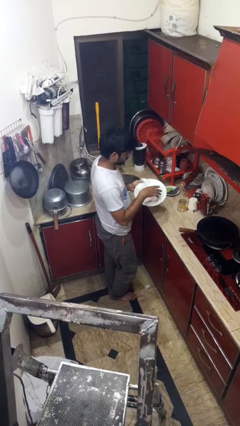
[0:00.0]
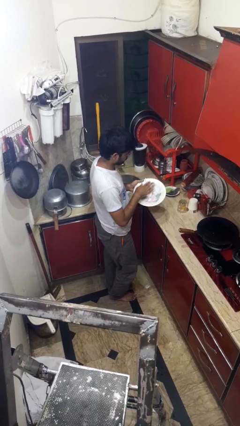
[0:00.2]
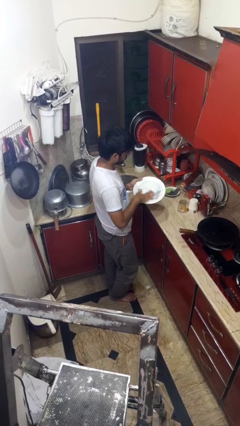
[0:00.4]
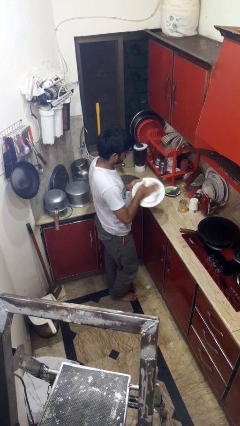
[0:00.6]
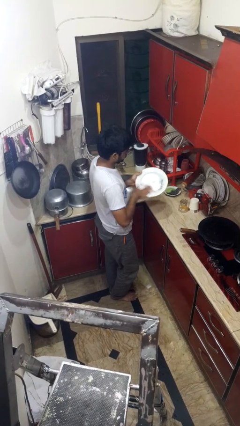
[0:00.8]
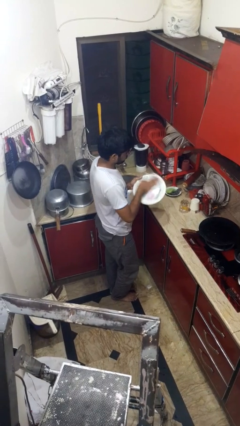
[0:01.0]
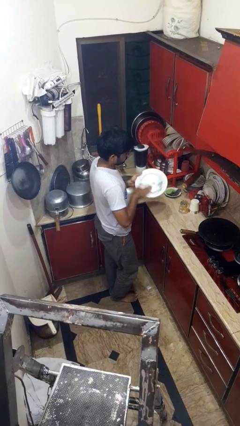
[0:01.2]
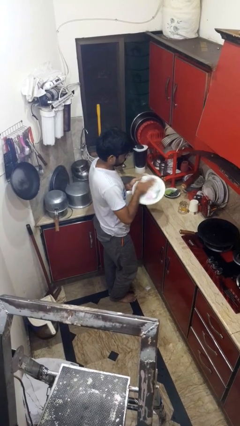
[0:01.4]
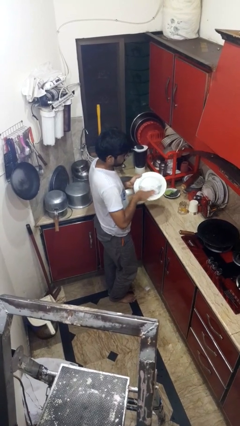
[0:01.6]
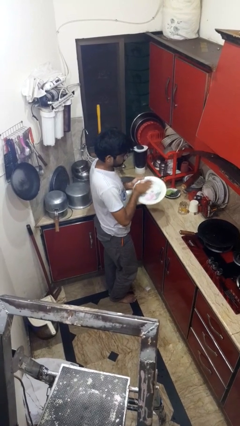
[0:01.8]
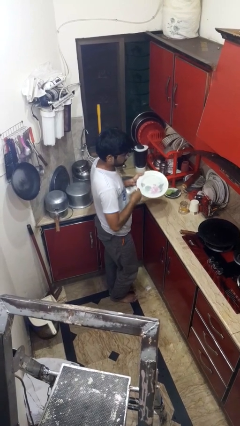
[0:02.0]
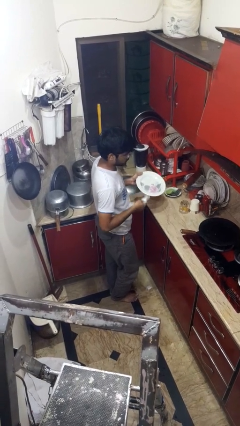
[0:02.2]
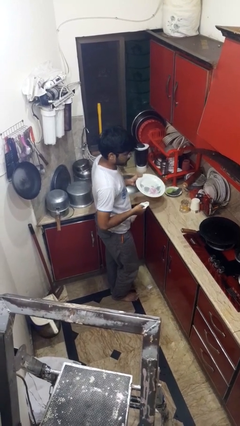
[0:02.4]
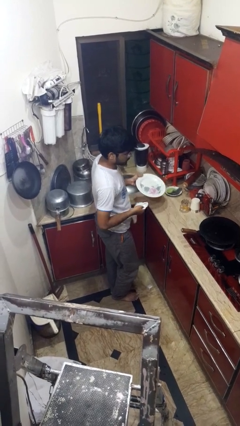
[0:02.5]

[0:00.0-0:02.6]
person dries dish

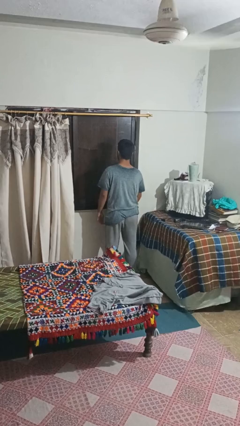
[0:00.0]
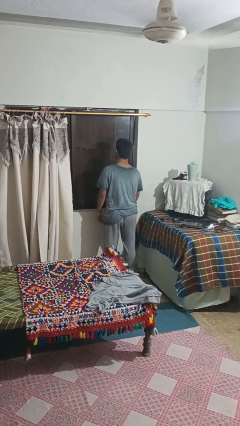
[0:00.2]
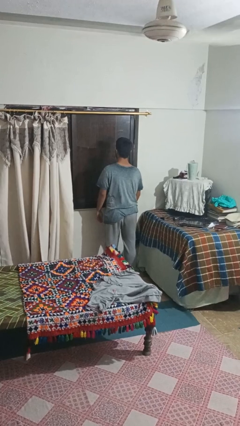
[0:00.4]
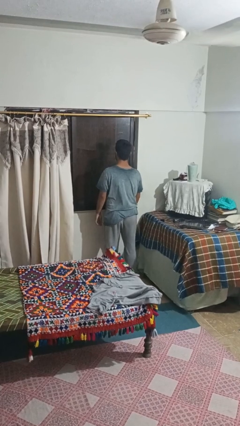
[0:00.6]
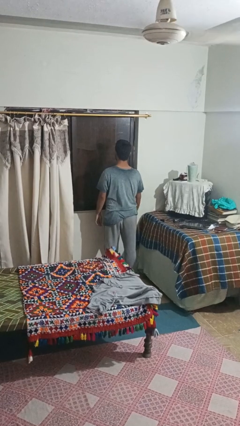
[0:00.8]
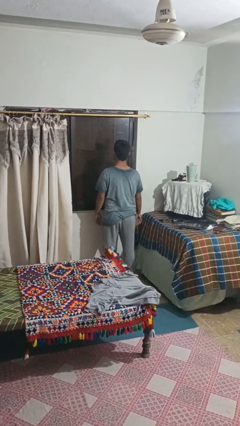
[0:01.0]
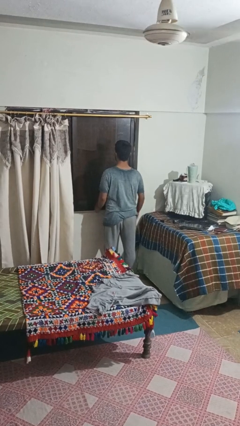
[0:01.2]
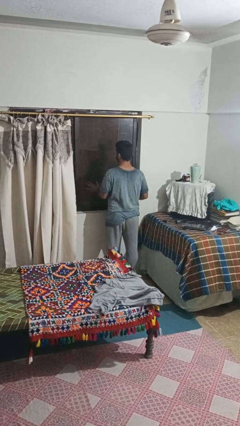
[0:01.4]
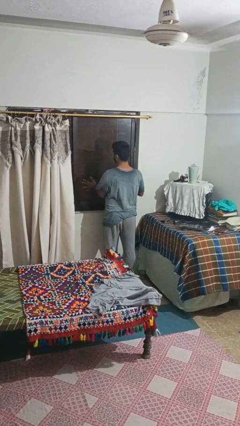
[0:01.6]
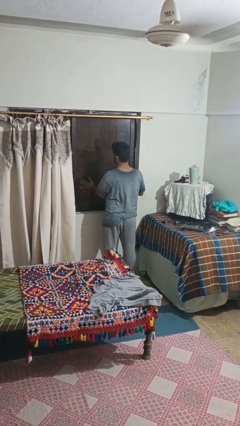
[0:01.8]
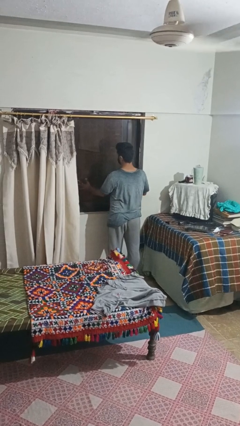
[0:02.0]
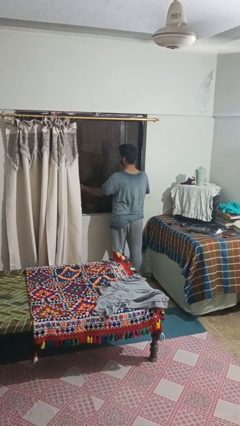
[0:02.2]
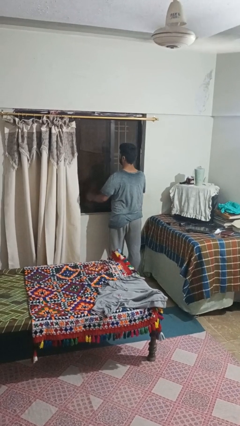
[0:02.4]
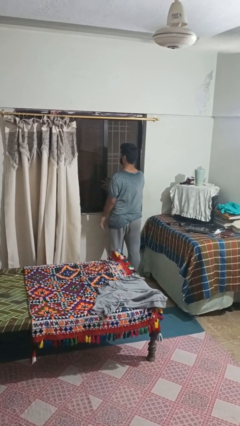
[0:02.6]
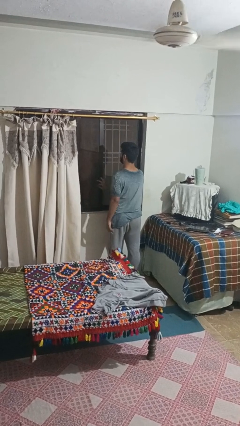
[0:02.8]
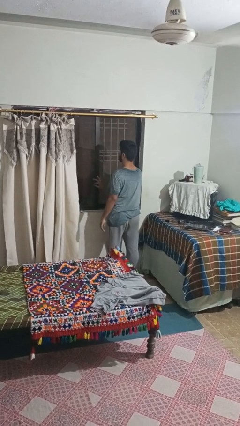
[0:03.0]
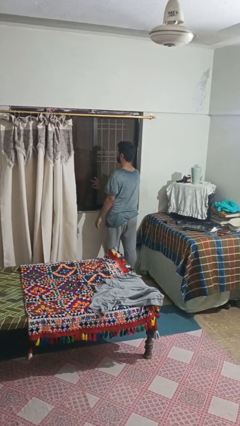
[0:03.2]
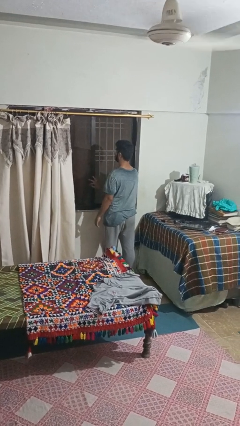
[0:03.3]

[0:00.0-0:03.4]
person opens home window

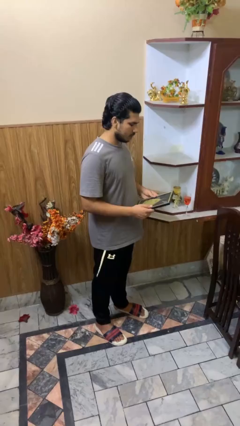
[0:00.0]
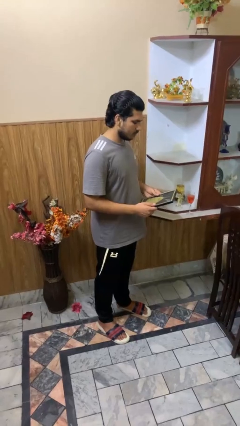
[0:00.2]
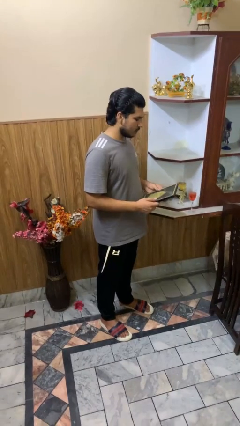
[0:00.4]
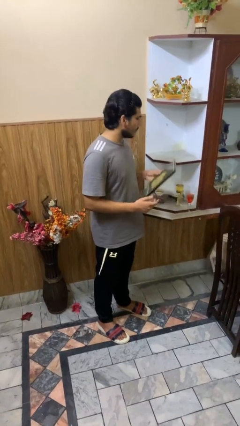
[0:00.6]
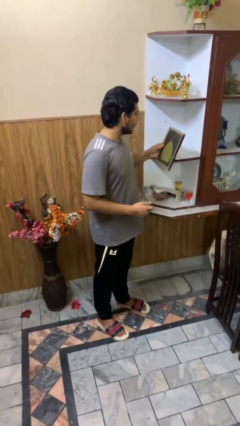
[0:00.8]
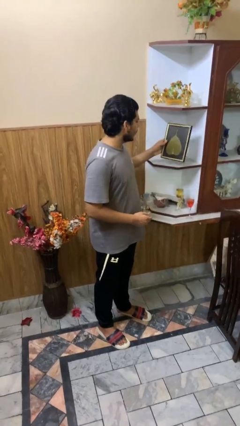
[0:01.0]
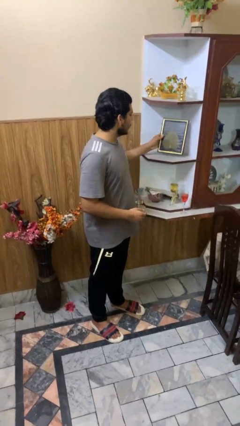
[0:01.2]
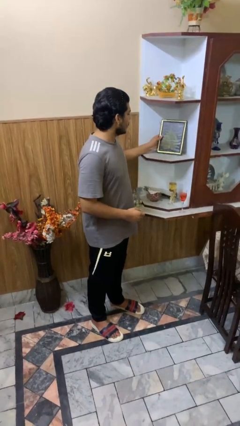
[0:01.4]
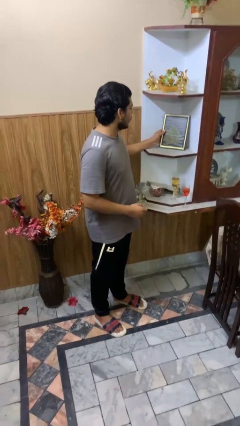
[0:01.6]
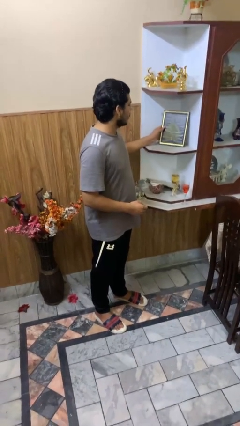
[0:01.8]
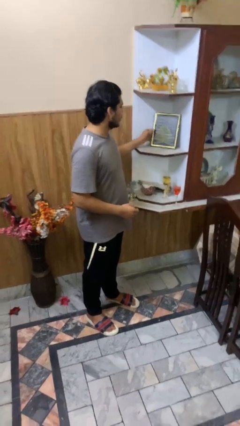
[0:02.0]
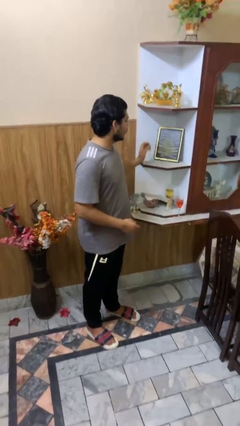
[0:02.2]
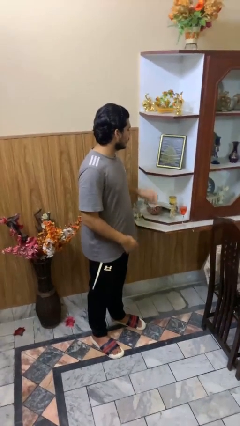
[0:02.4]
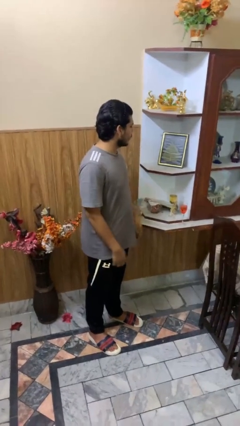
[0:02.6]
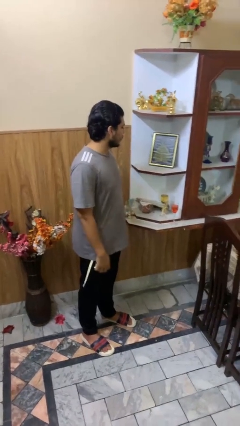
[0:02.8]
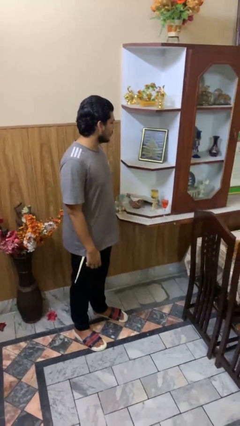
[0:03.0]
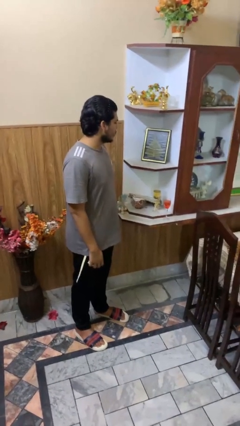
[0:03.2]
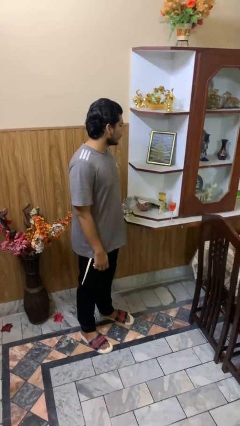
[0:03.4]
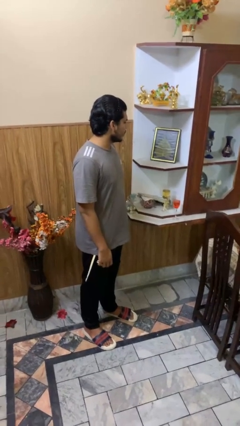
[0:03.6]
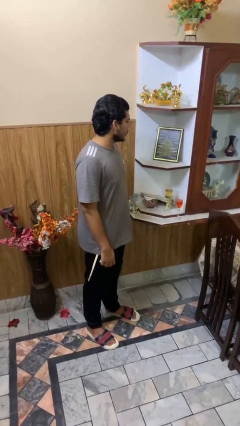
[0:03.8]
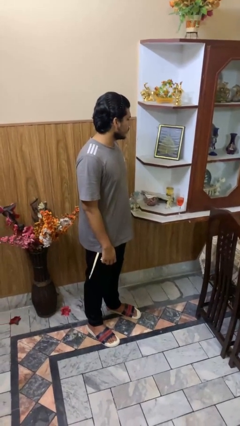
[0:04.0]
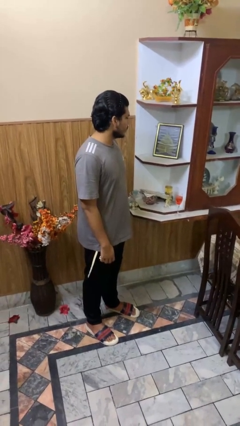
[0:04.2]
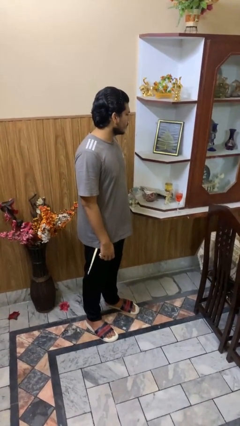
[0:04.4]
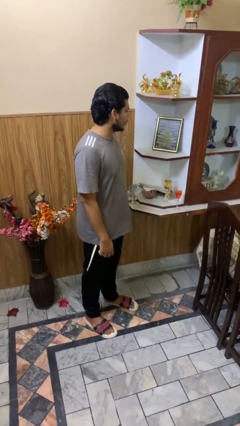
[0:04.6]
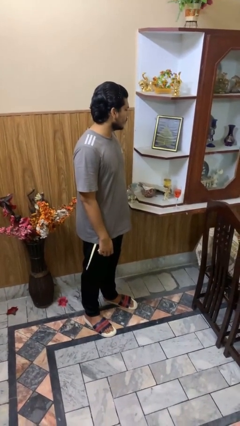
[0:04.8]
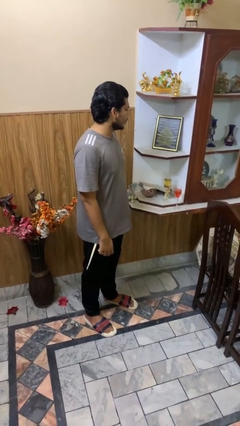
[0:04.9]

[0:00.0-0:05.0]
person puts up picture frame

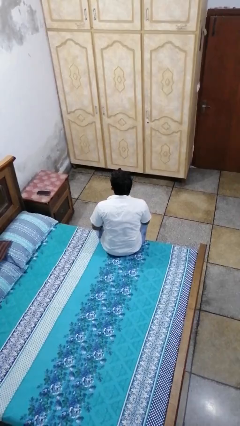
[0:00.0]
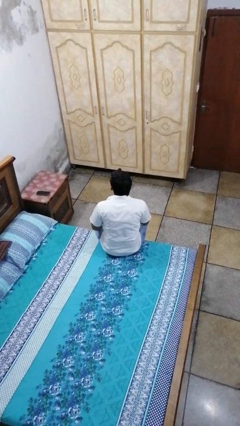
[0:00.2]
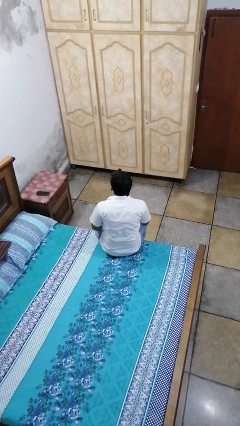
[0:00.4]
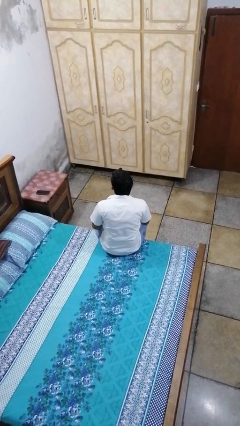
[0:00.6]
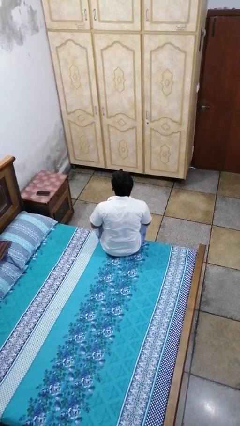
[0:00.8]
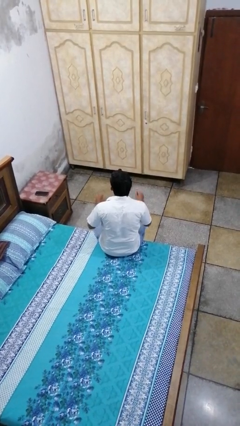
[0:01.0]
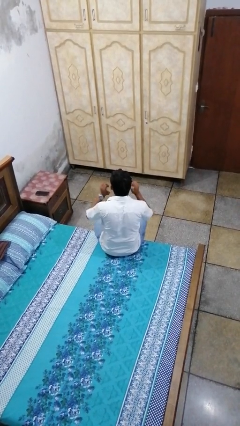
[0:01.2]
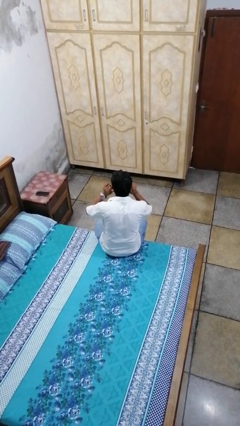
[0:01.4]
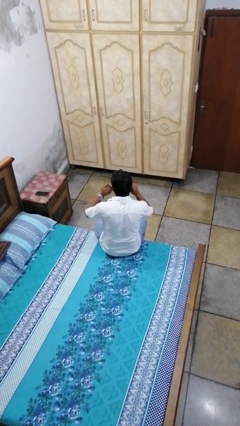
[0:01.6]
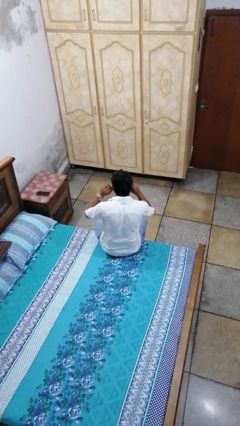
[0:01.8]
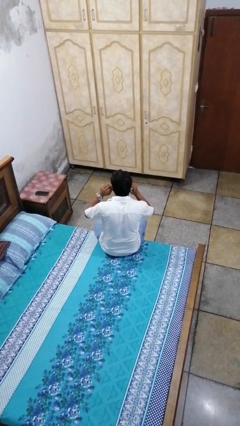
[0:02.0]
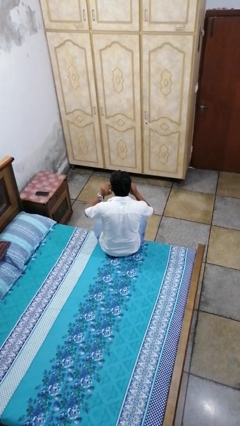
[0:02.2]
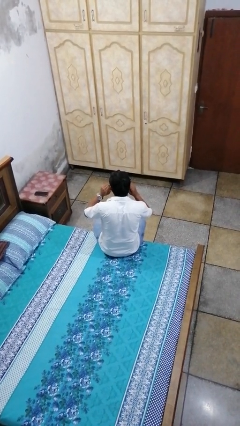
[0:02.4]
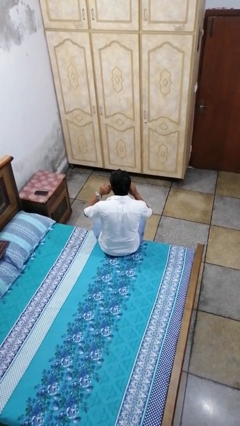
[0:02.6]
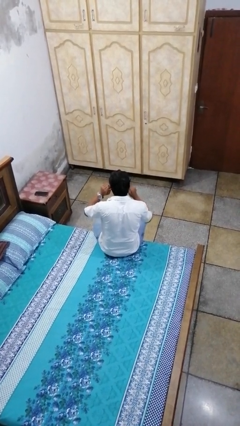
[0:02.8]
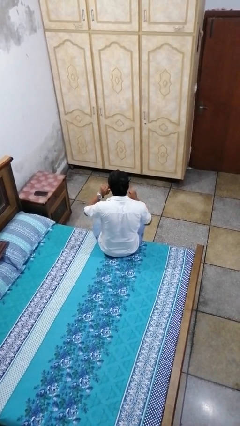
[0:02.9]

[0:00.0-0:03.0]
person touches earlobe

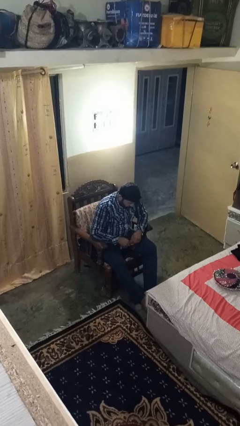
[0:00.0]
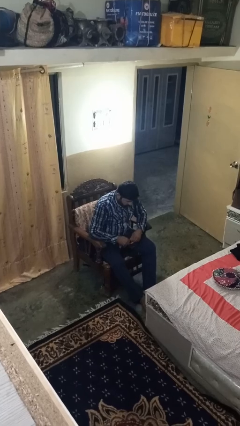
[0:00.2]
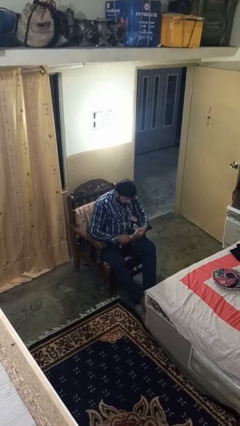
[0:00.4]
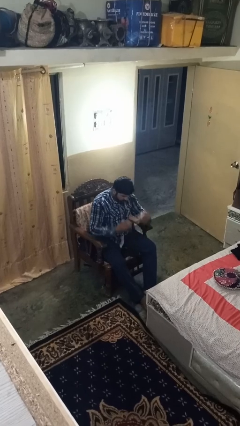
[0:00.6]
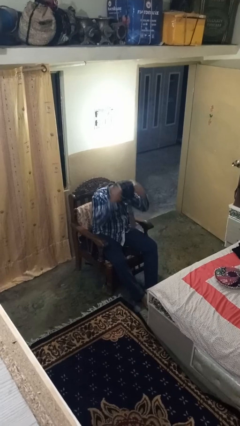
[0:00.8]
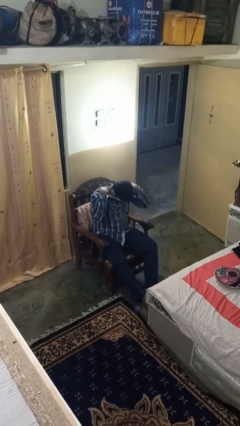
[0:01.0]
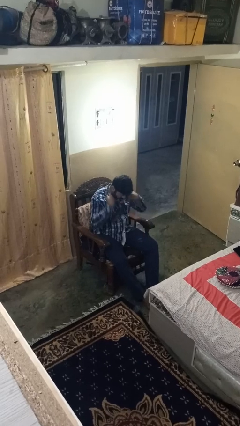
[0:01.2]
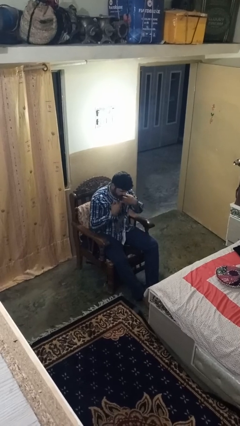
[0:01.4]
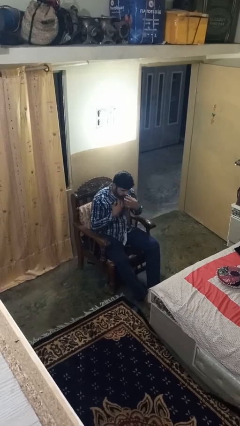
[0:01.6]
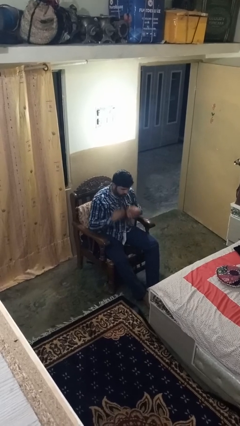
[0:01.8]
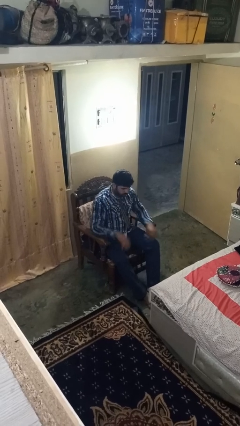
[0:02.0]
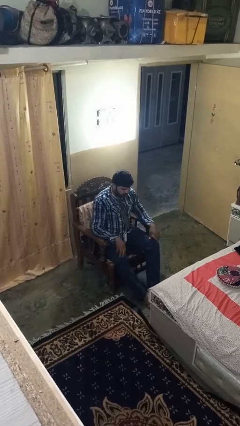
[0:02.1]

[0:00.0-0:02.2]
person puts on necktie

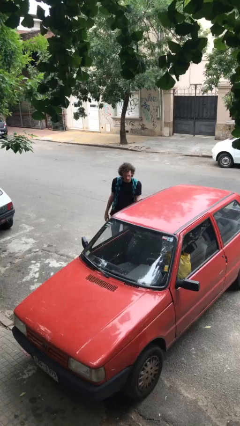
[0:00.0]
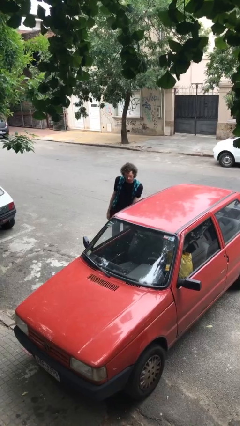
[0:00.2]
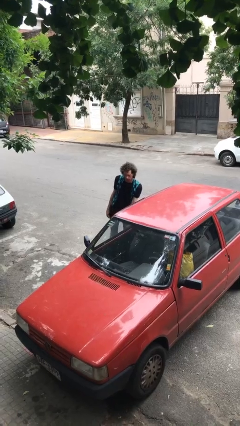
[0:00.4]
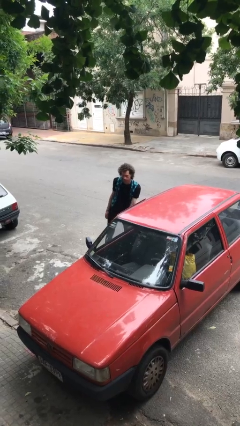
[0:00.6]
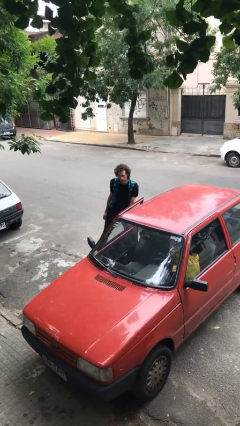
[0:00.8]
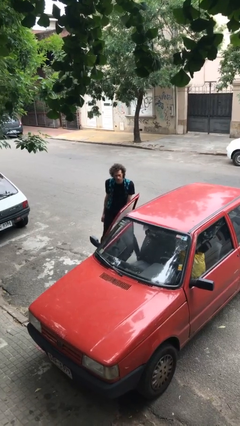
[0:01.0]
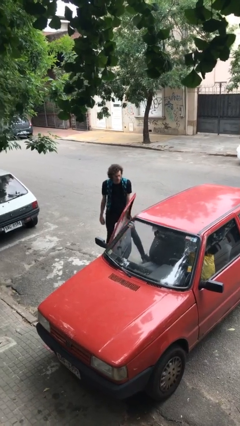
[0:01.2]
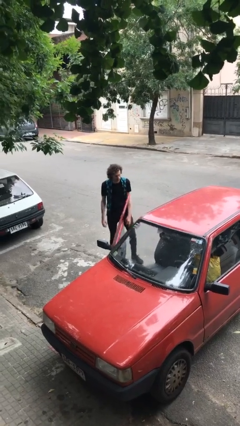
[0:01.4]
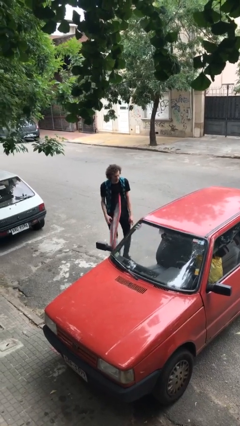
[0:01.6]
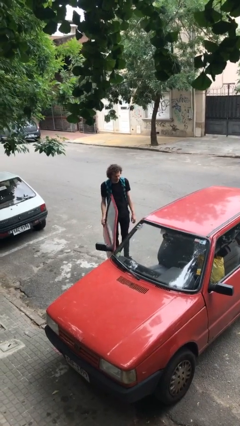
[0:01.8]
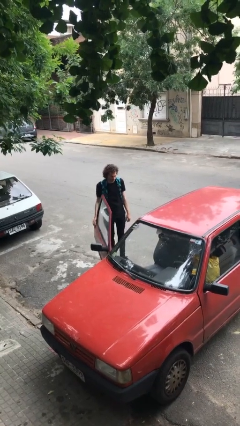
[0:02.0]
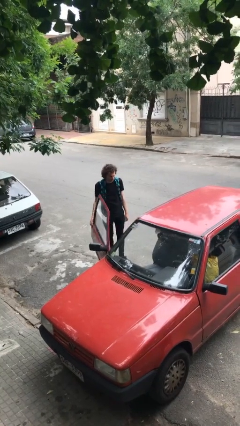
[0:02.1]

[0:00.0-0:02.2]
person opens car trunk
